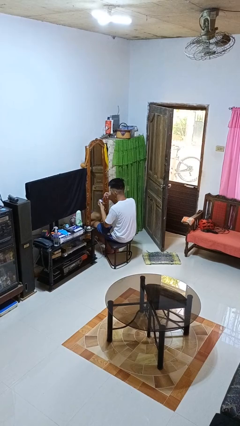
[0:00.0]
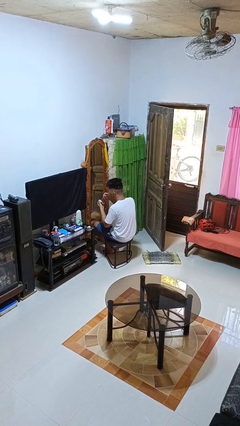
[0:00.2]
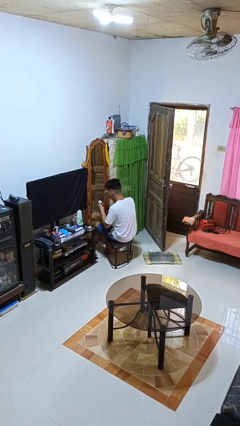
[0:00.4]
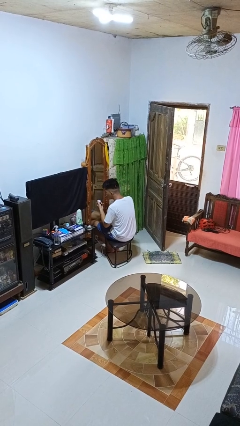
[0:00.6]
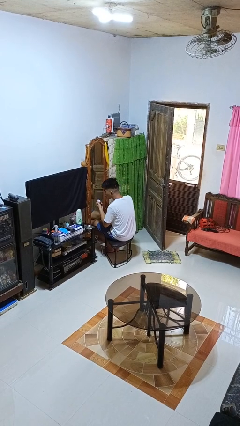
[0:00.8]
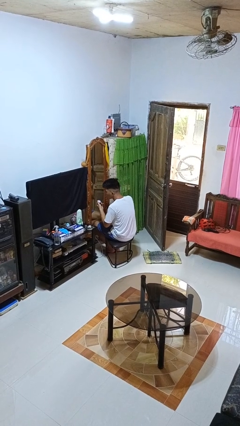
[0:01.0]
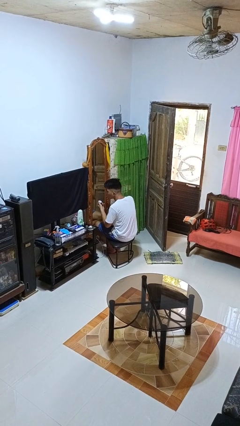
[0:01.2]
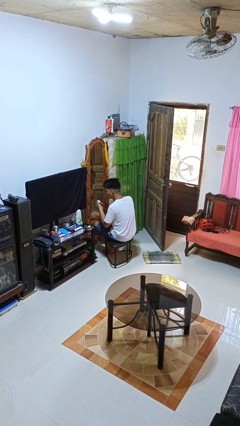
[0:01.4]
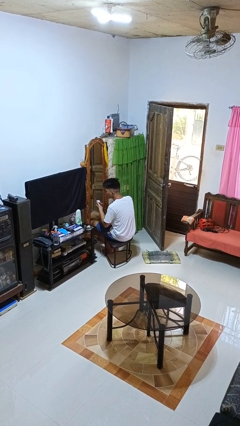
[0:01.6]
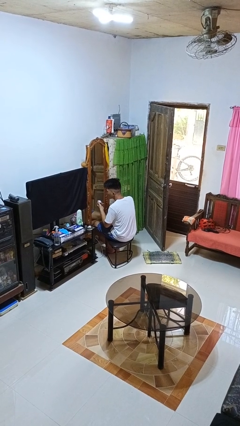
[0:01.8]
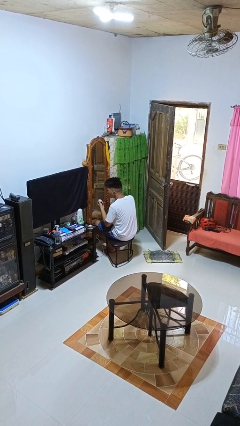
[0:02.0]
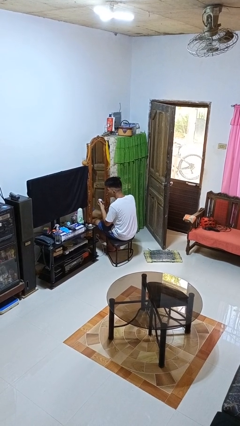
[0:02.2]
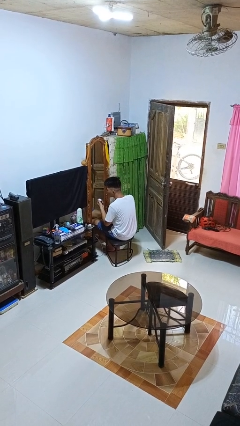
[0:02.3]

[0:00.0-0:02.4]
person applies eye makeup

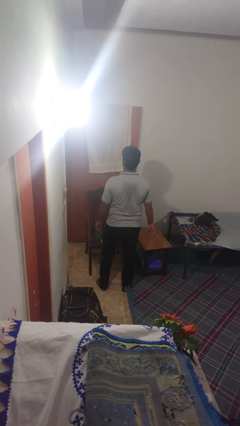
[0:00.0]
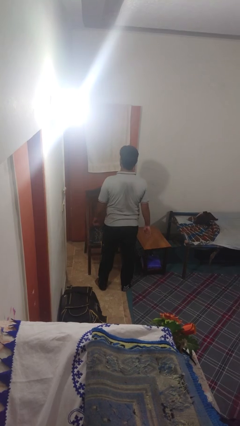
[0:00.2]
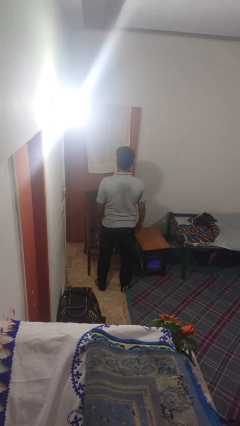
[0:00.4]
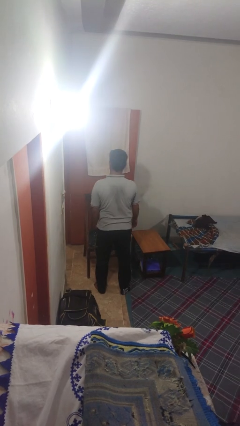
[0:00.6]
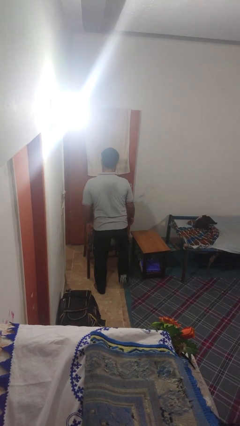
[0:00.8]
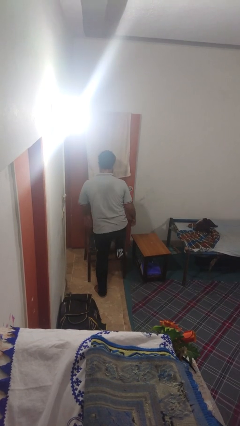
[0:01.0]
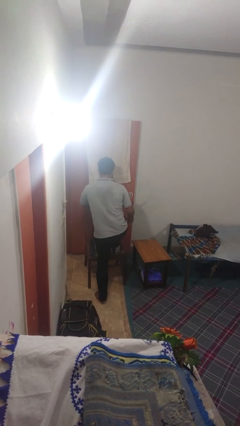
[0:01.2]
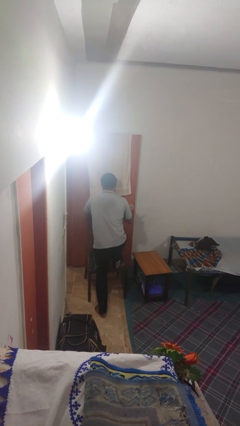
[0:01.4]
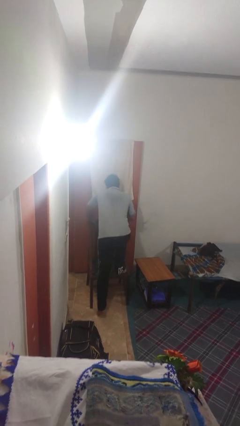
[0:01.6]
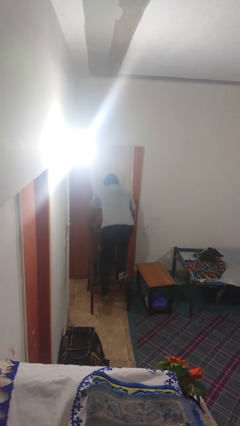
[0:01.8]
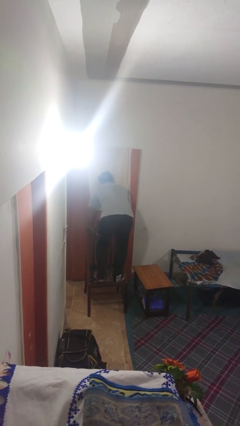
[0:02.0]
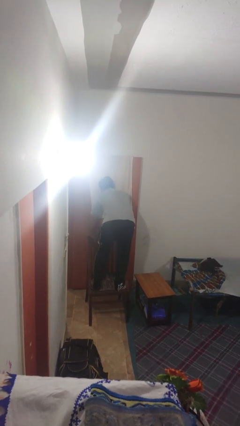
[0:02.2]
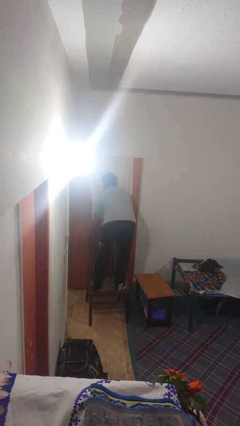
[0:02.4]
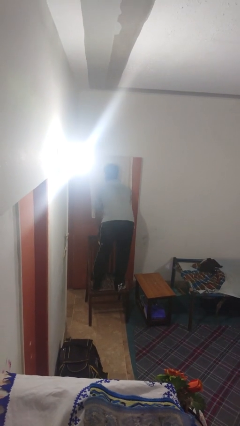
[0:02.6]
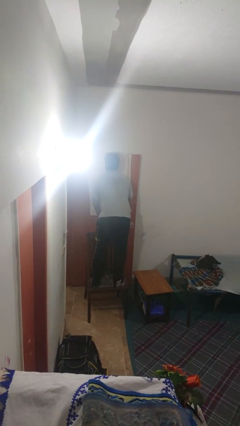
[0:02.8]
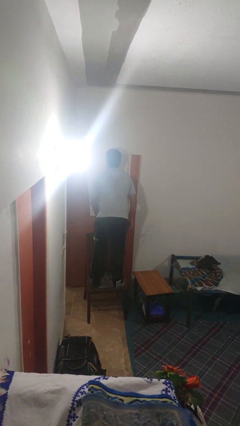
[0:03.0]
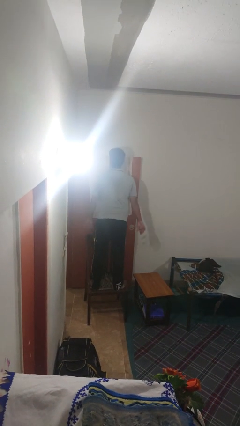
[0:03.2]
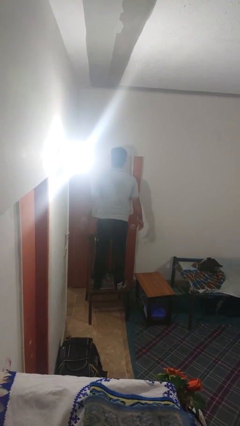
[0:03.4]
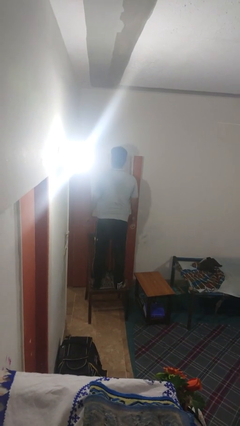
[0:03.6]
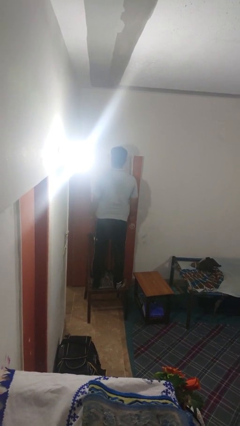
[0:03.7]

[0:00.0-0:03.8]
person climbs on chair

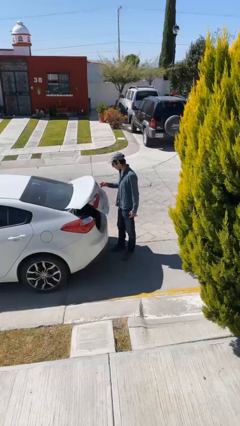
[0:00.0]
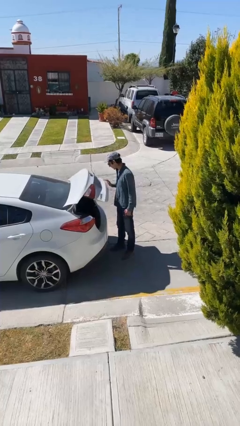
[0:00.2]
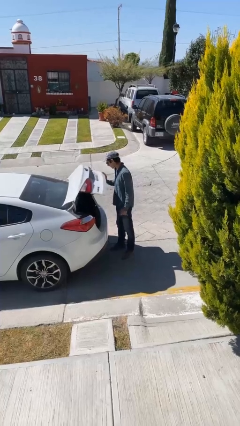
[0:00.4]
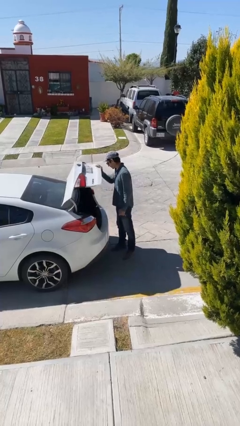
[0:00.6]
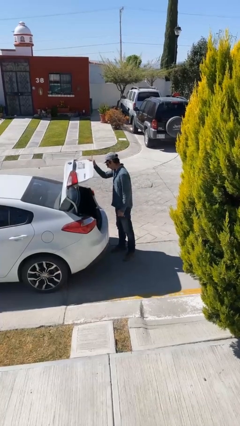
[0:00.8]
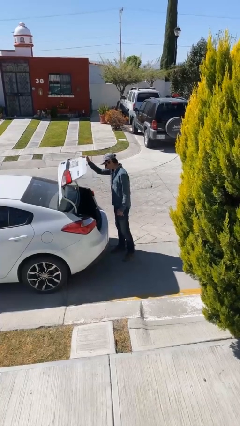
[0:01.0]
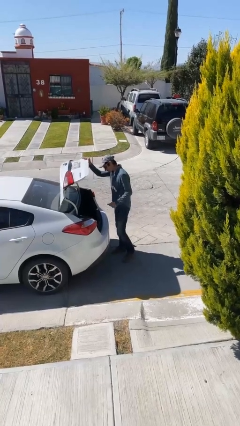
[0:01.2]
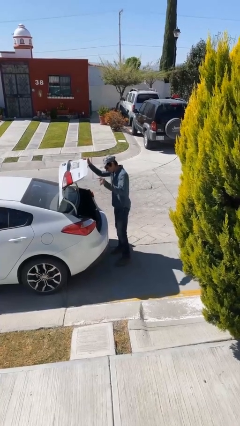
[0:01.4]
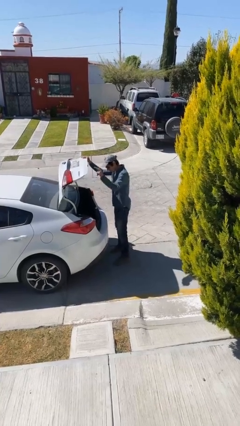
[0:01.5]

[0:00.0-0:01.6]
person opens car trunk

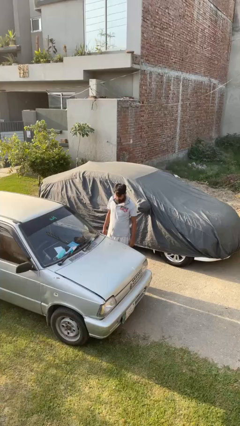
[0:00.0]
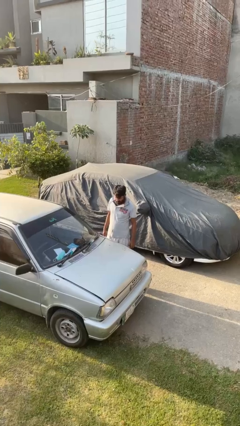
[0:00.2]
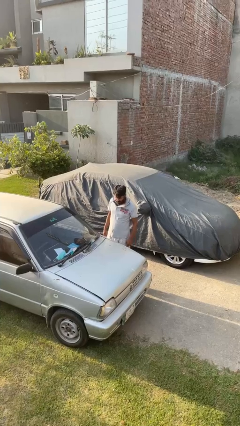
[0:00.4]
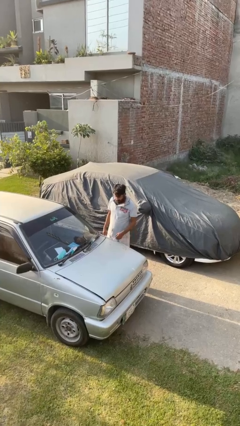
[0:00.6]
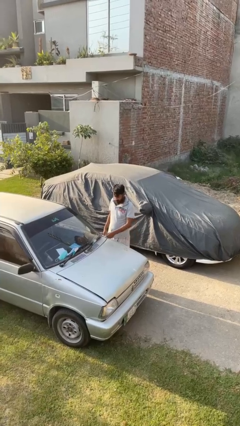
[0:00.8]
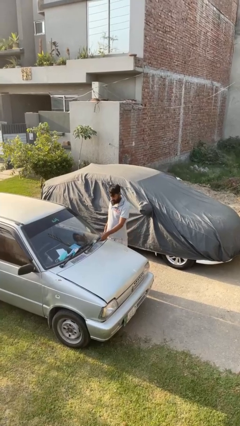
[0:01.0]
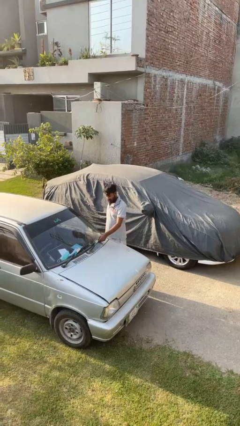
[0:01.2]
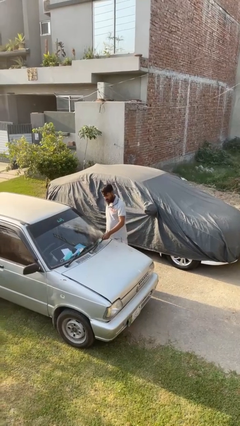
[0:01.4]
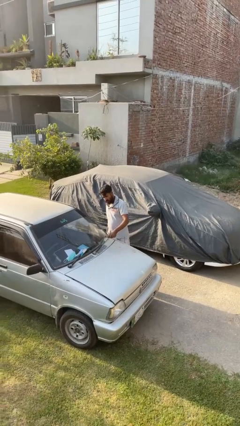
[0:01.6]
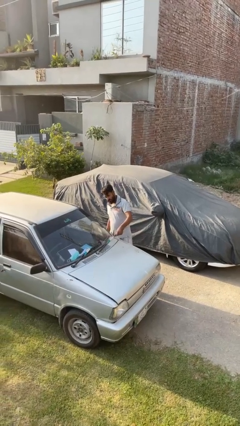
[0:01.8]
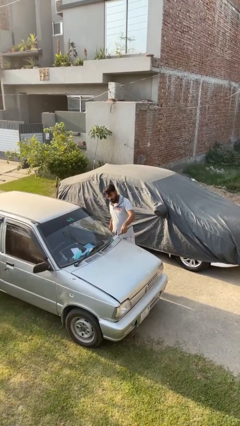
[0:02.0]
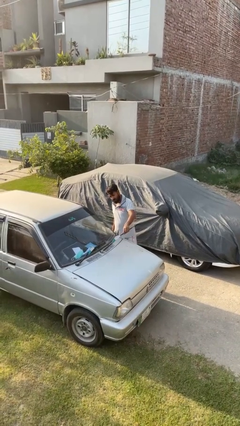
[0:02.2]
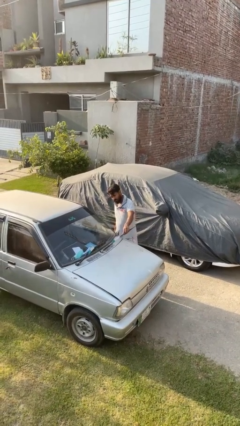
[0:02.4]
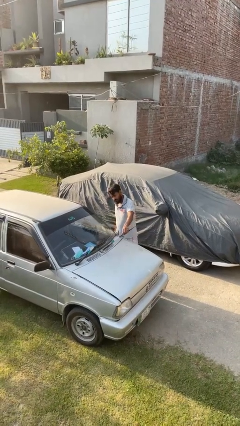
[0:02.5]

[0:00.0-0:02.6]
person flips up car wipers

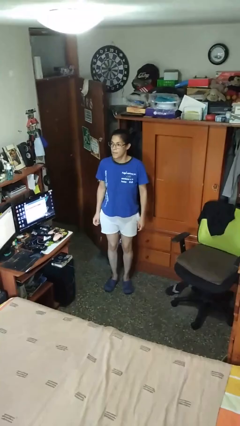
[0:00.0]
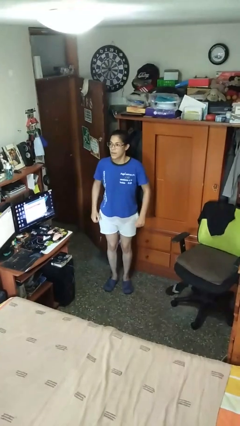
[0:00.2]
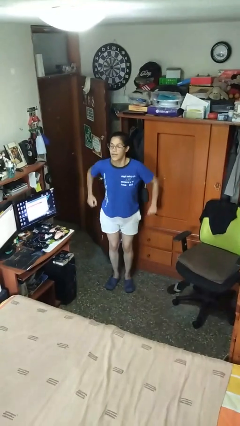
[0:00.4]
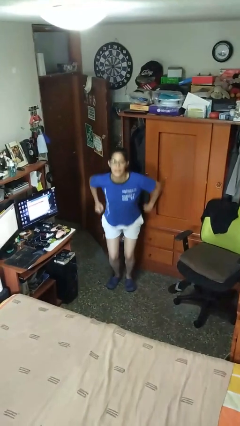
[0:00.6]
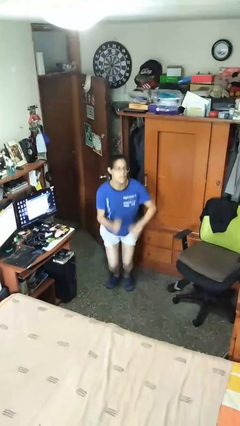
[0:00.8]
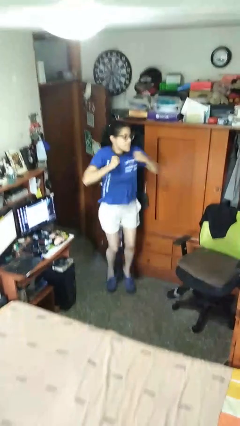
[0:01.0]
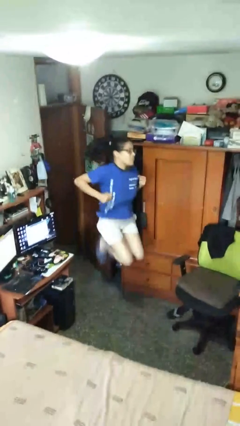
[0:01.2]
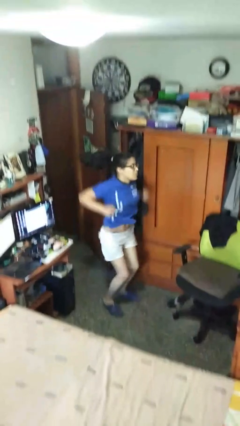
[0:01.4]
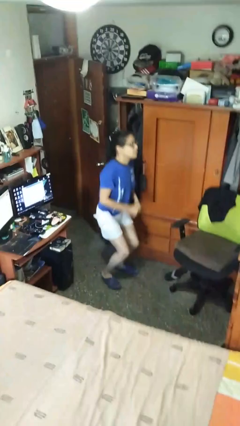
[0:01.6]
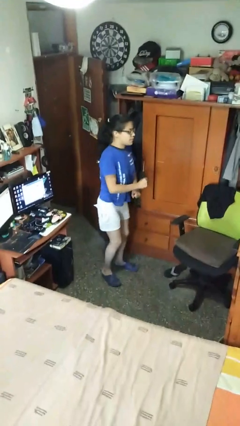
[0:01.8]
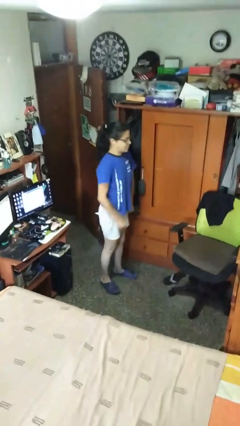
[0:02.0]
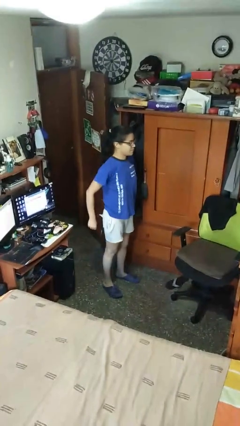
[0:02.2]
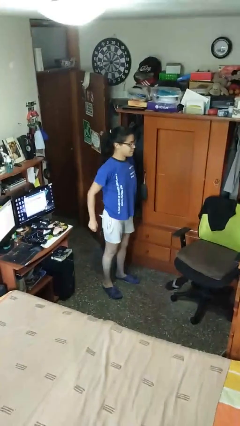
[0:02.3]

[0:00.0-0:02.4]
person jumps

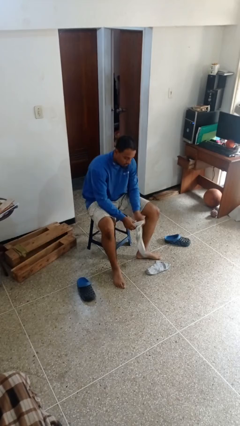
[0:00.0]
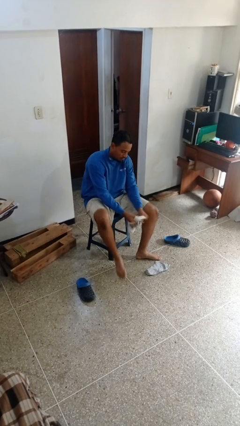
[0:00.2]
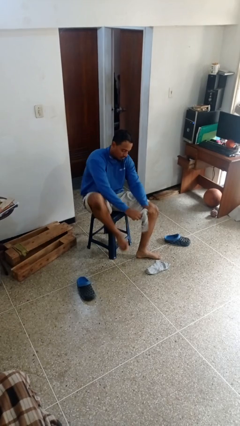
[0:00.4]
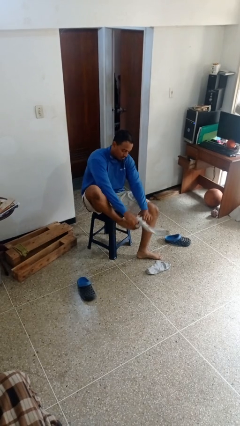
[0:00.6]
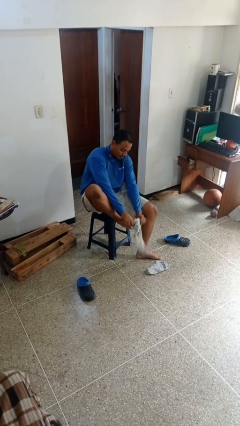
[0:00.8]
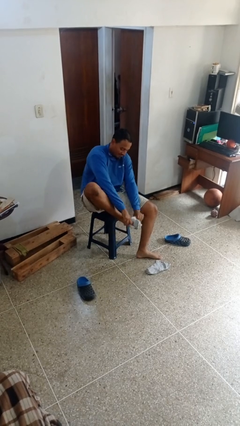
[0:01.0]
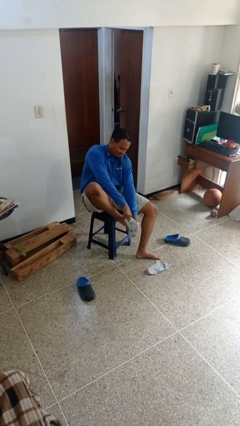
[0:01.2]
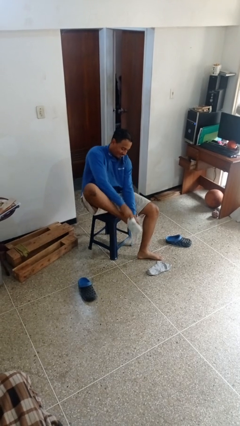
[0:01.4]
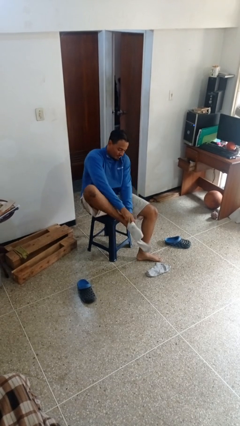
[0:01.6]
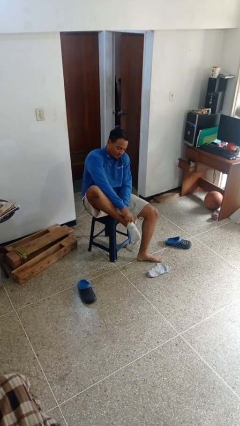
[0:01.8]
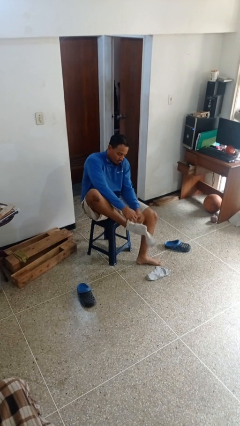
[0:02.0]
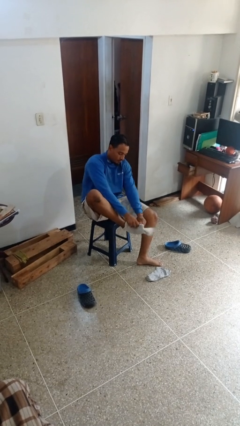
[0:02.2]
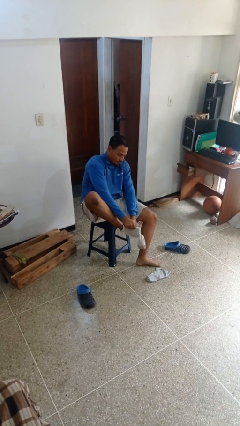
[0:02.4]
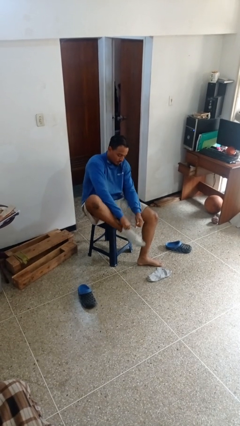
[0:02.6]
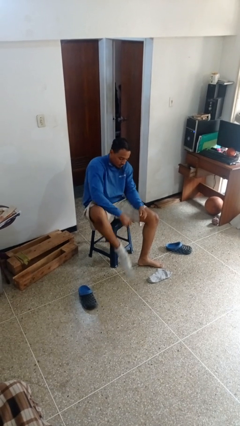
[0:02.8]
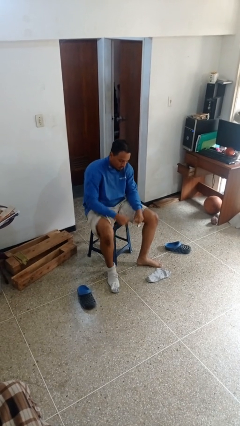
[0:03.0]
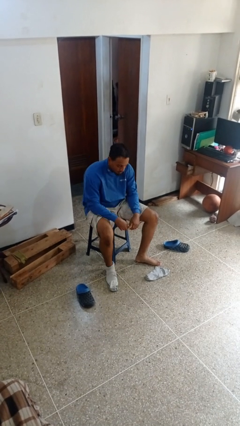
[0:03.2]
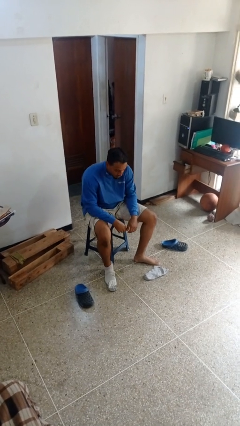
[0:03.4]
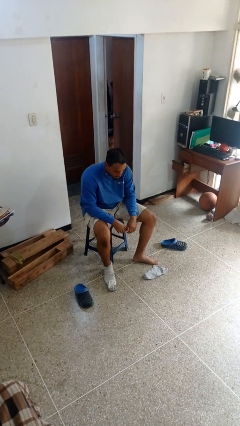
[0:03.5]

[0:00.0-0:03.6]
person puts on socks

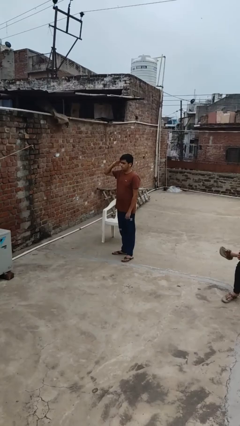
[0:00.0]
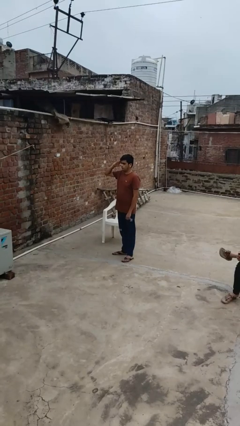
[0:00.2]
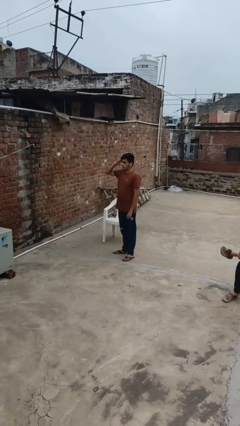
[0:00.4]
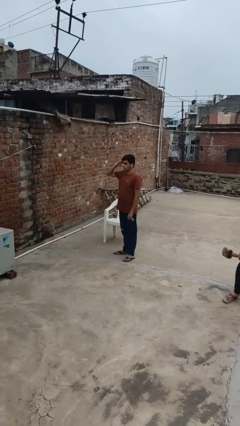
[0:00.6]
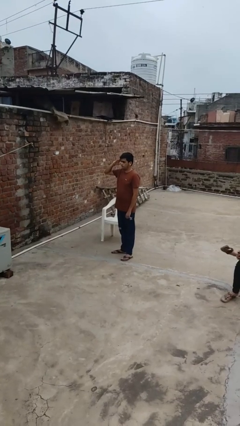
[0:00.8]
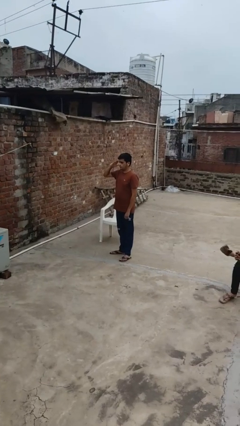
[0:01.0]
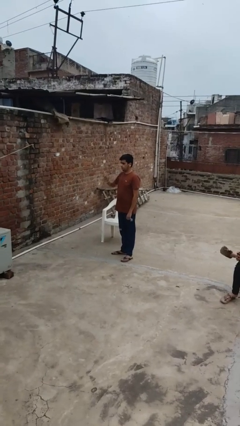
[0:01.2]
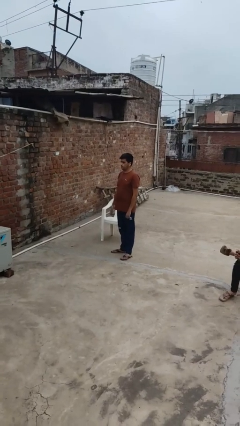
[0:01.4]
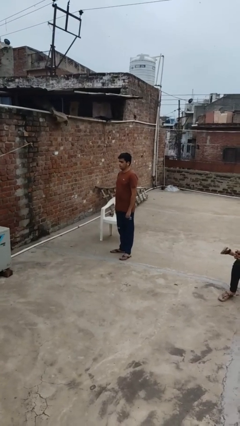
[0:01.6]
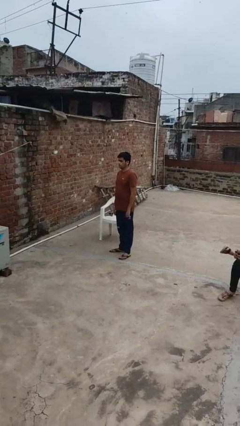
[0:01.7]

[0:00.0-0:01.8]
person salutes
